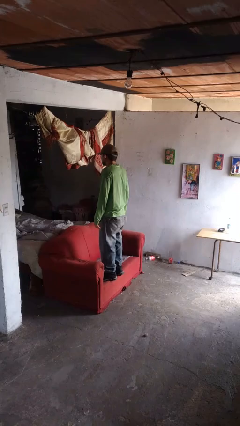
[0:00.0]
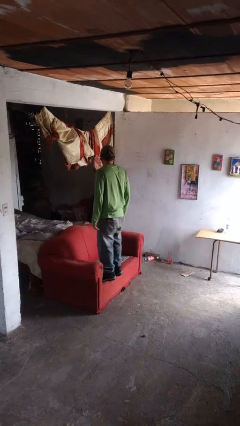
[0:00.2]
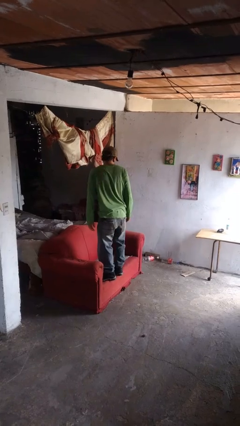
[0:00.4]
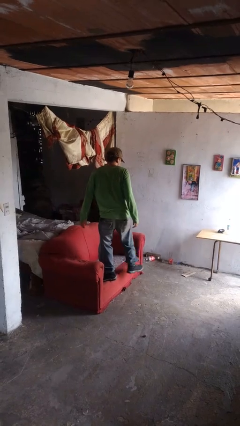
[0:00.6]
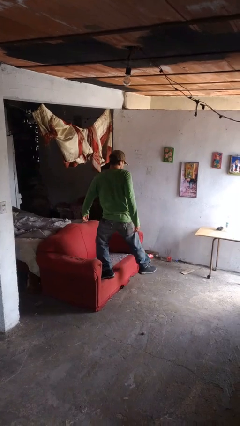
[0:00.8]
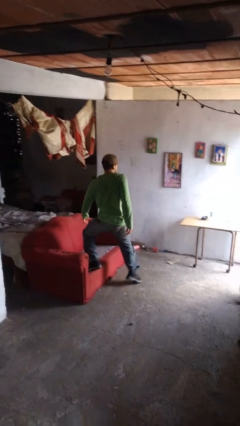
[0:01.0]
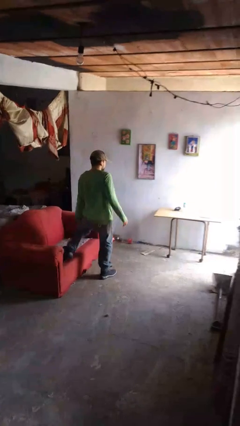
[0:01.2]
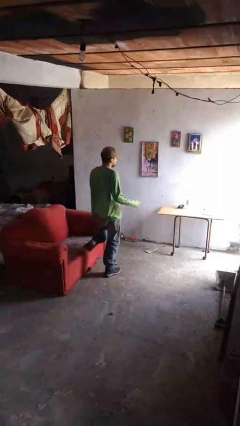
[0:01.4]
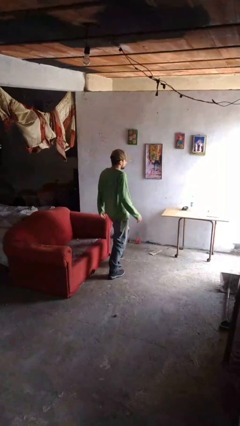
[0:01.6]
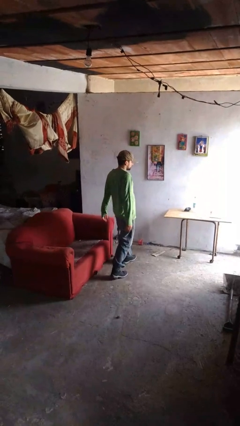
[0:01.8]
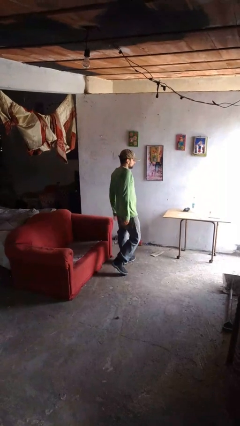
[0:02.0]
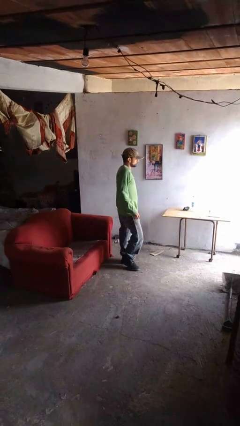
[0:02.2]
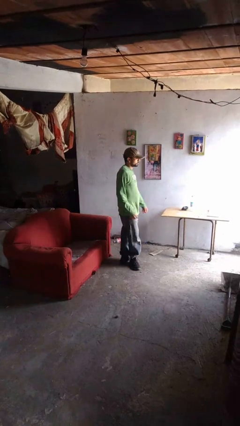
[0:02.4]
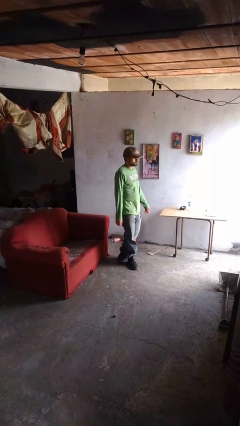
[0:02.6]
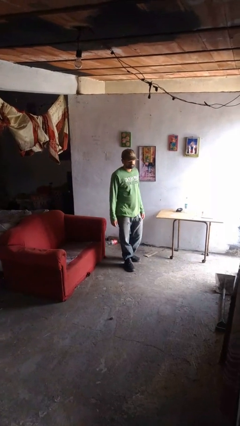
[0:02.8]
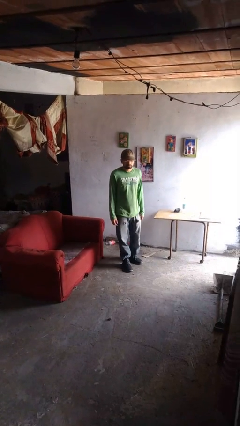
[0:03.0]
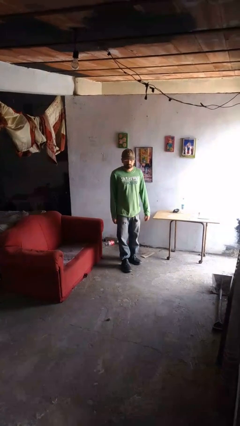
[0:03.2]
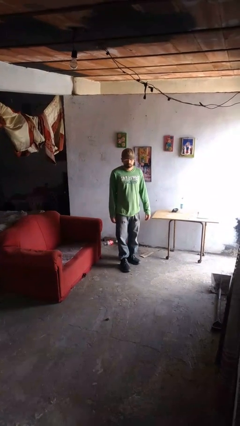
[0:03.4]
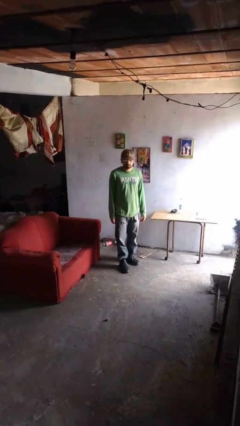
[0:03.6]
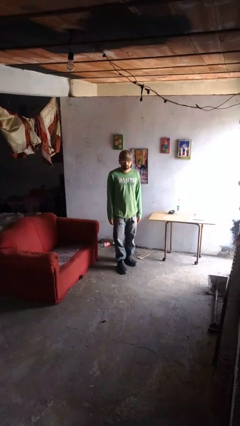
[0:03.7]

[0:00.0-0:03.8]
person climbs off couch

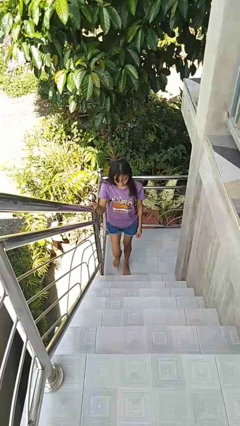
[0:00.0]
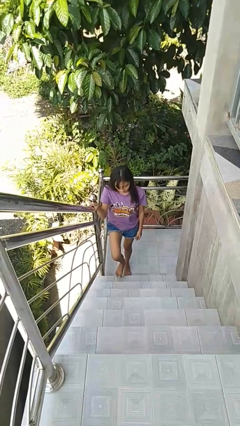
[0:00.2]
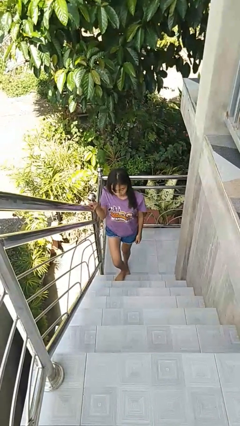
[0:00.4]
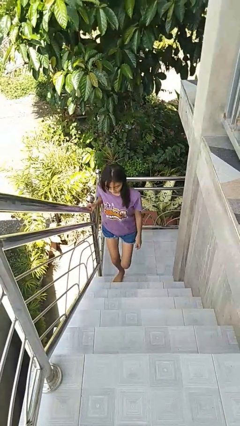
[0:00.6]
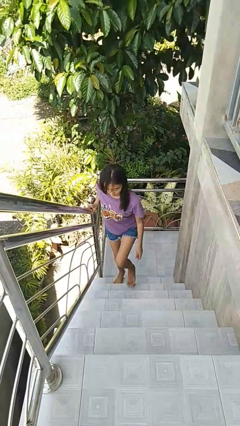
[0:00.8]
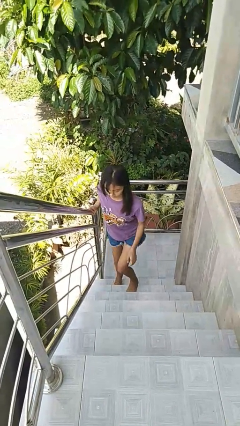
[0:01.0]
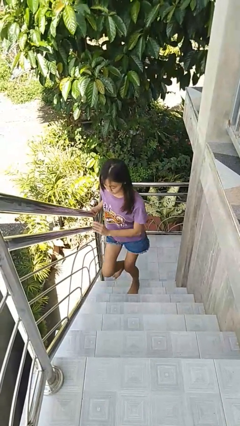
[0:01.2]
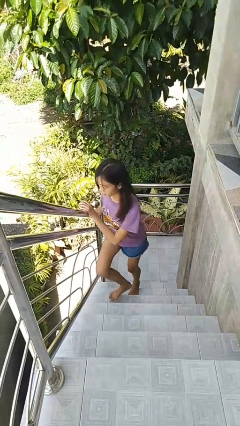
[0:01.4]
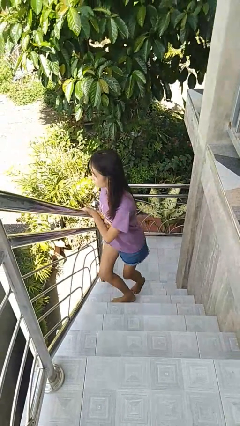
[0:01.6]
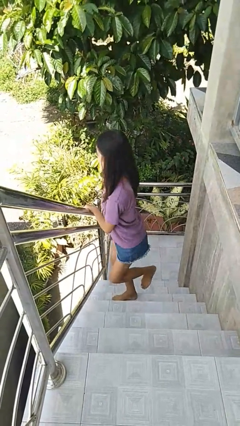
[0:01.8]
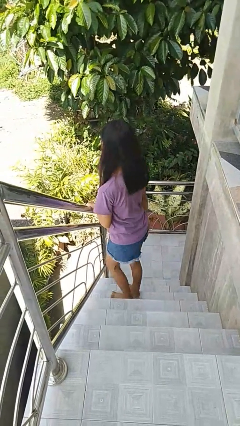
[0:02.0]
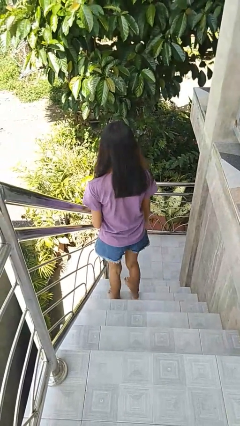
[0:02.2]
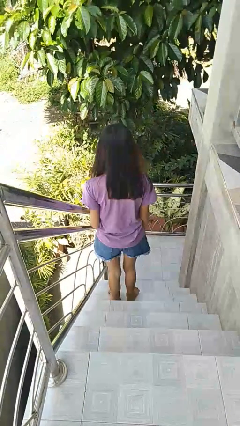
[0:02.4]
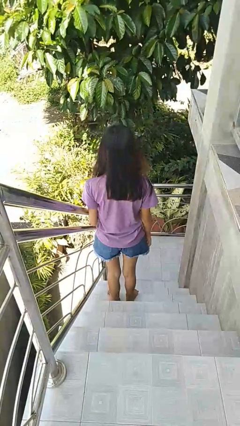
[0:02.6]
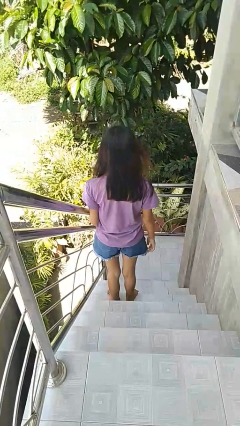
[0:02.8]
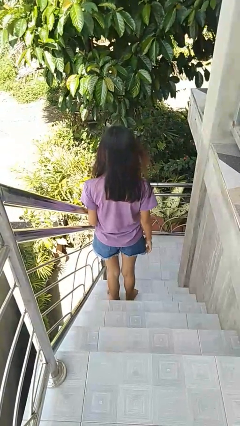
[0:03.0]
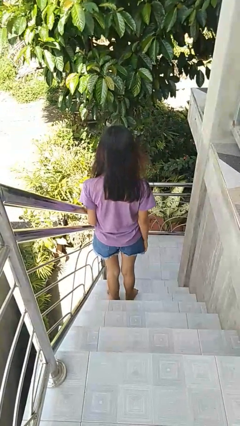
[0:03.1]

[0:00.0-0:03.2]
person climbs up stairs

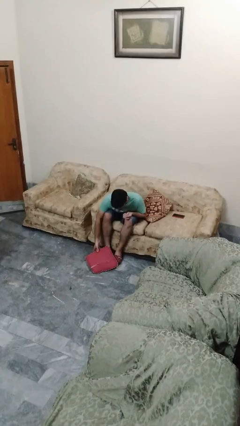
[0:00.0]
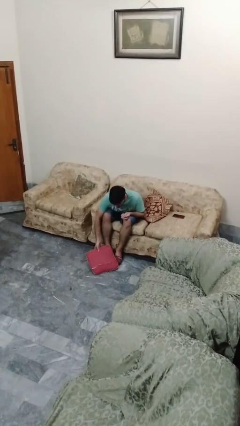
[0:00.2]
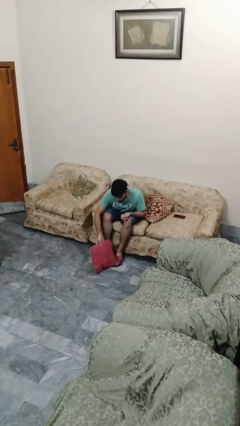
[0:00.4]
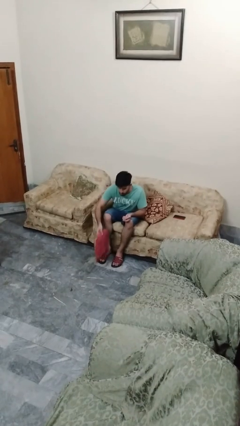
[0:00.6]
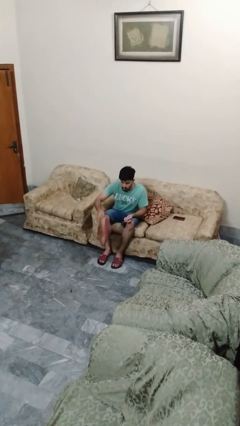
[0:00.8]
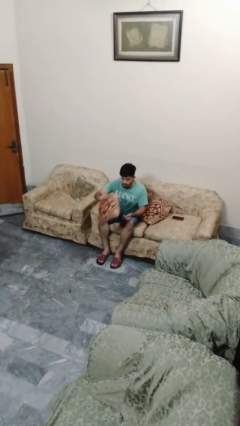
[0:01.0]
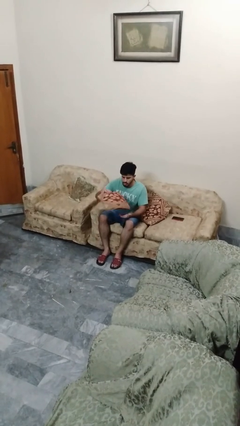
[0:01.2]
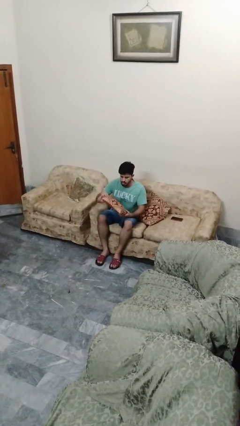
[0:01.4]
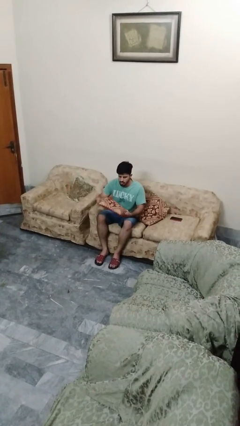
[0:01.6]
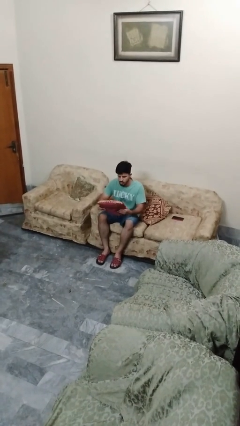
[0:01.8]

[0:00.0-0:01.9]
person picks up object from floor

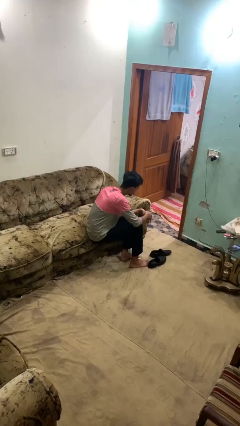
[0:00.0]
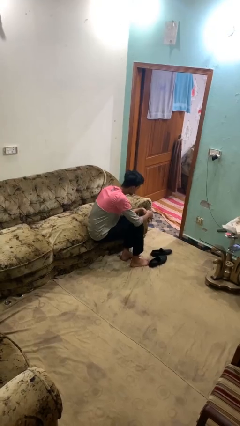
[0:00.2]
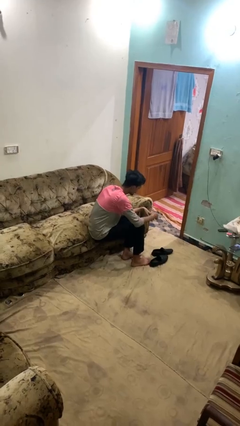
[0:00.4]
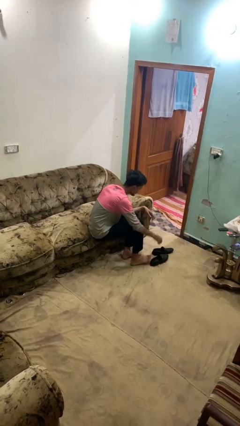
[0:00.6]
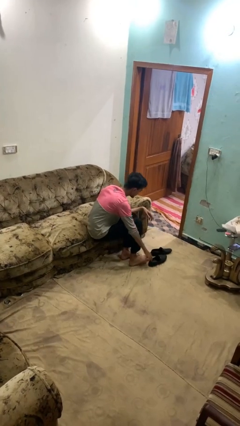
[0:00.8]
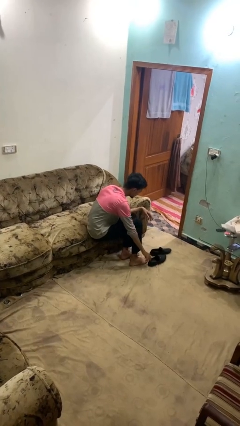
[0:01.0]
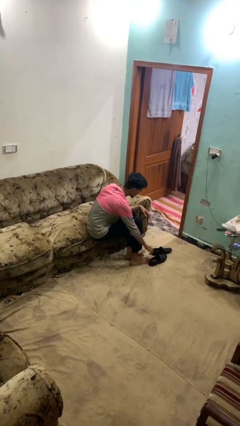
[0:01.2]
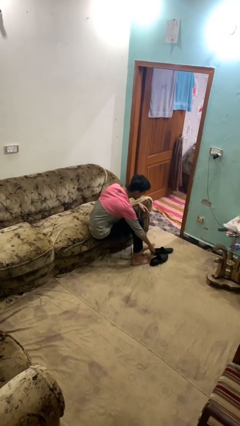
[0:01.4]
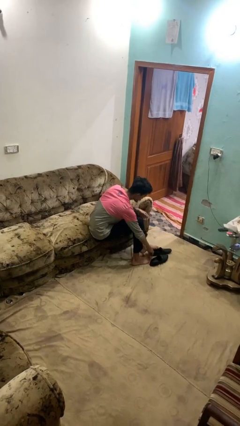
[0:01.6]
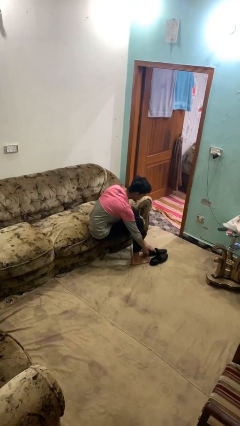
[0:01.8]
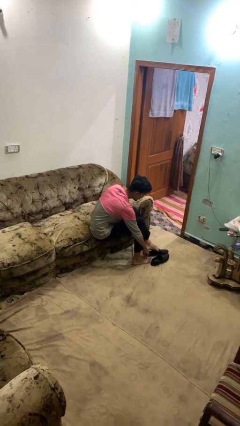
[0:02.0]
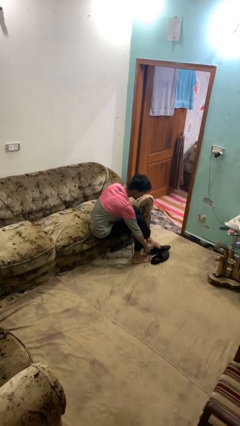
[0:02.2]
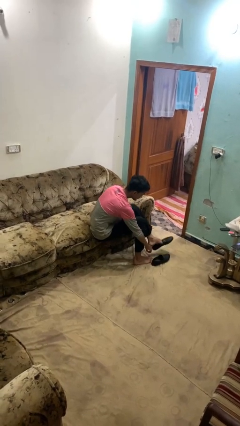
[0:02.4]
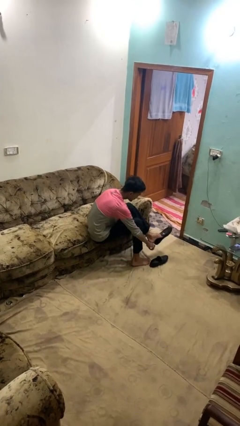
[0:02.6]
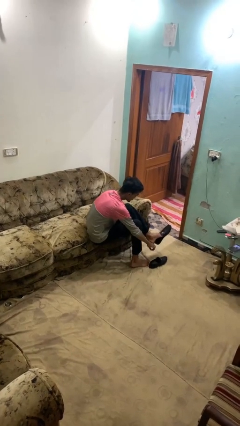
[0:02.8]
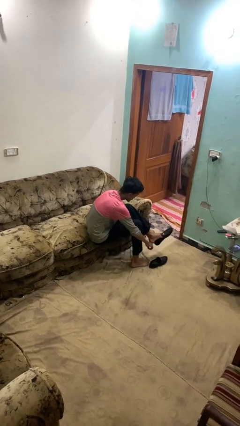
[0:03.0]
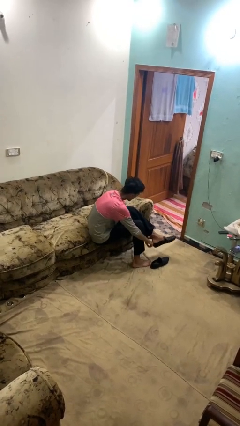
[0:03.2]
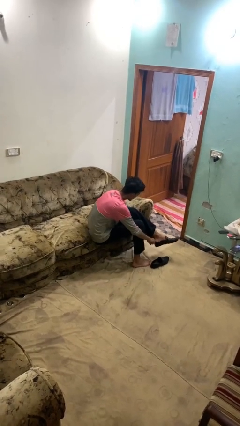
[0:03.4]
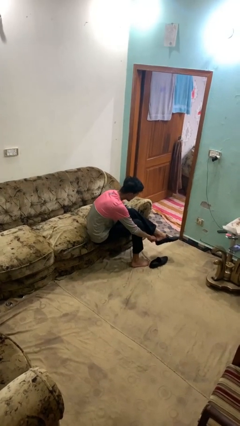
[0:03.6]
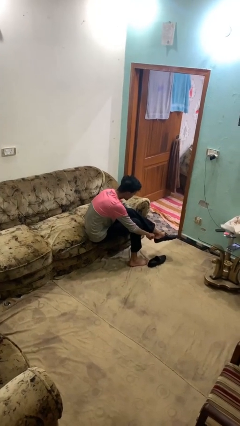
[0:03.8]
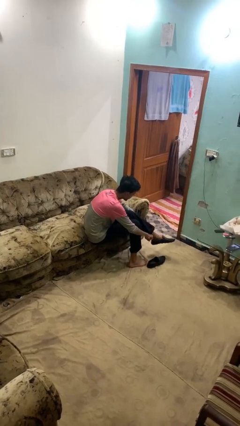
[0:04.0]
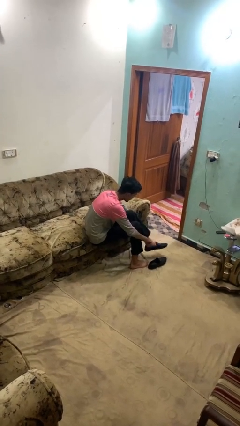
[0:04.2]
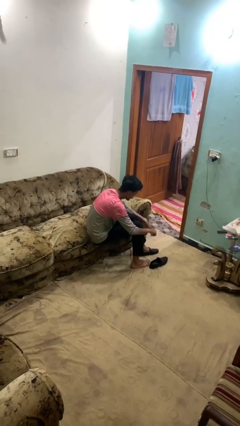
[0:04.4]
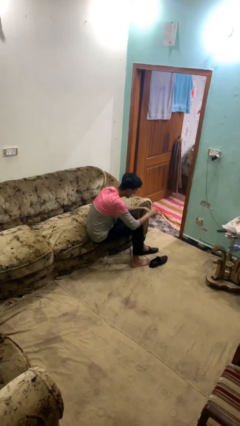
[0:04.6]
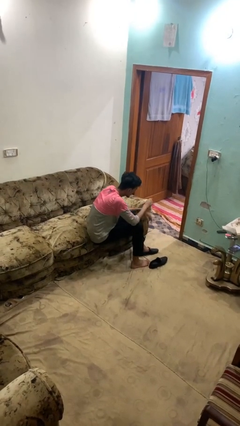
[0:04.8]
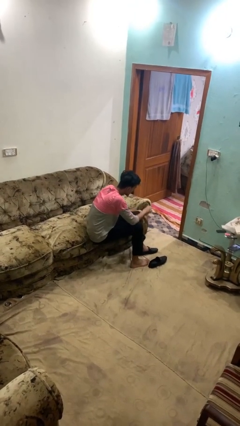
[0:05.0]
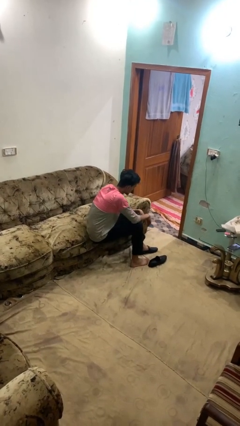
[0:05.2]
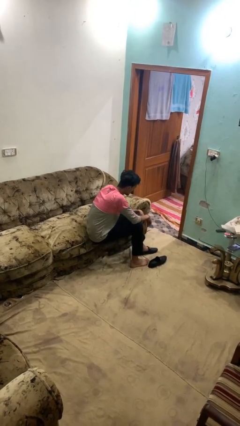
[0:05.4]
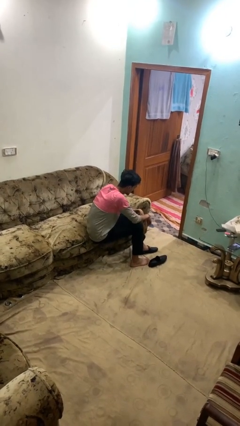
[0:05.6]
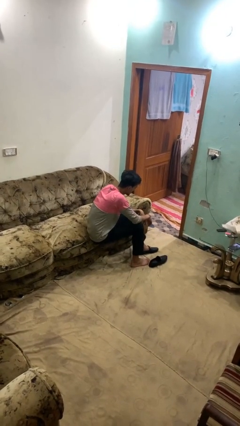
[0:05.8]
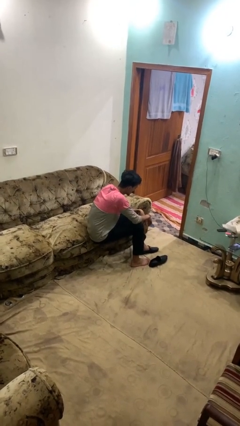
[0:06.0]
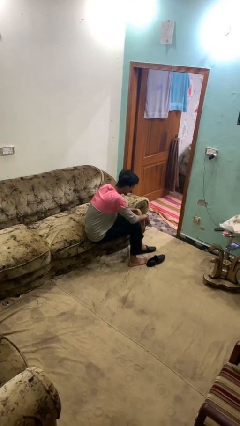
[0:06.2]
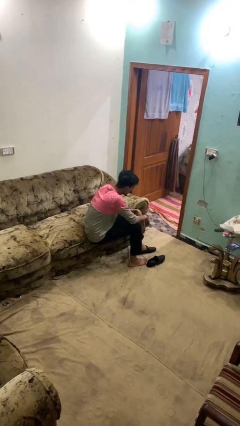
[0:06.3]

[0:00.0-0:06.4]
person puts on shoes

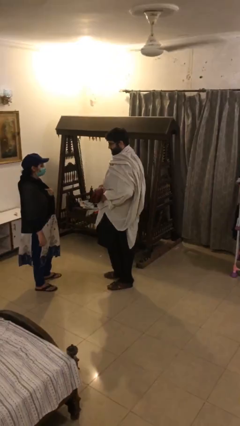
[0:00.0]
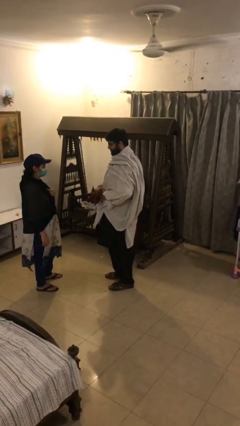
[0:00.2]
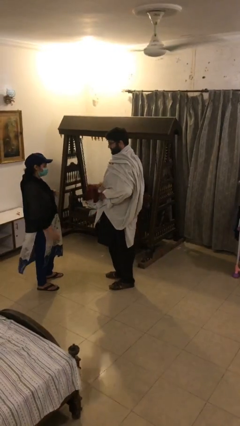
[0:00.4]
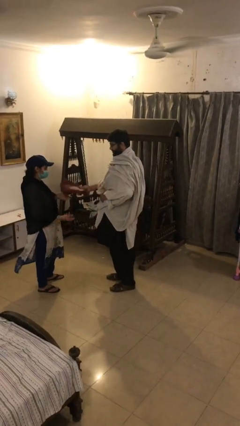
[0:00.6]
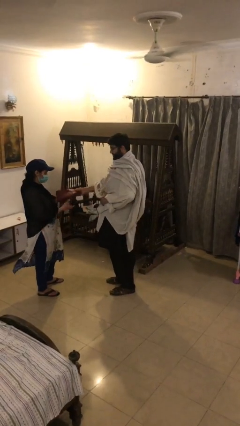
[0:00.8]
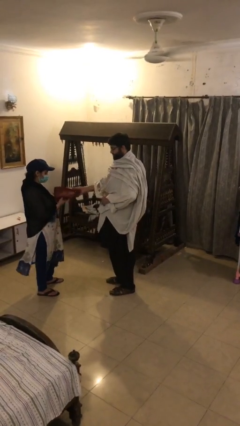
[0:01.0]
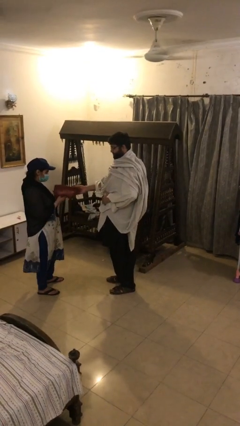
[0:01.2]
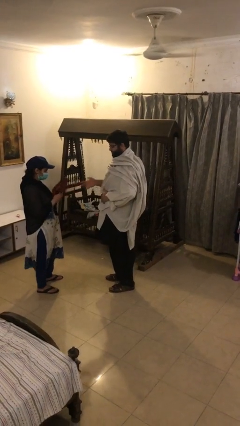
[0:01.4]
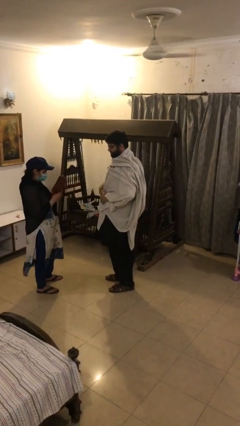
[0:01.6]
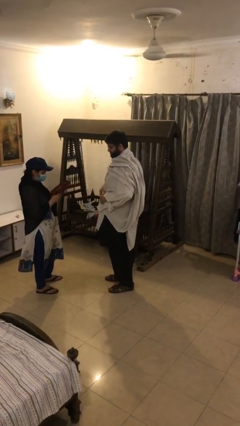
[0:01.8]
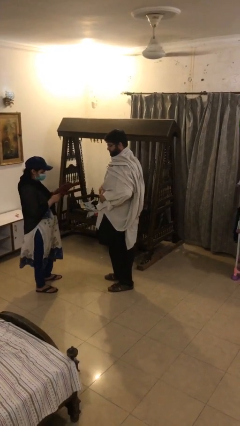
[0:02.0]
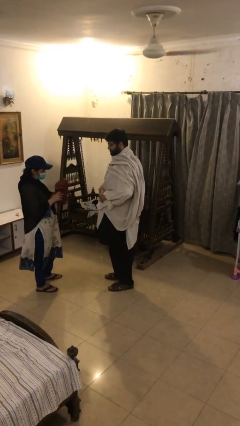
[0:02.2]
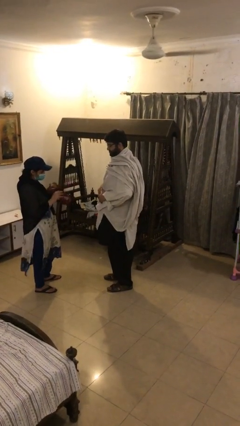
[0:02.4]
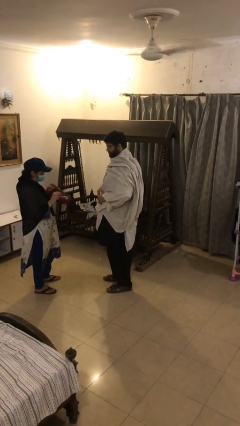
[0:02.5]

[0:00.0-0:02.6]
person transfers object to person
